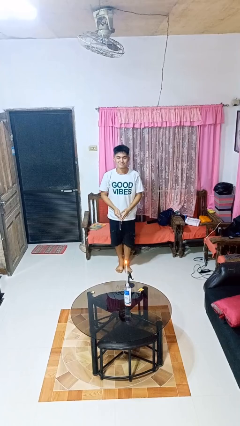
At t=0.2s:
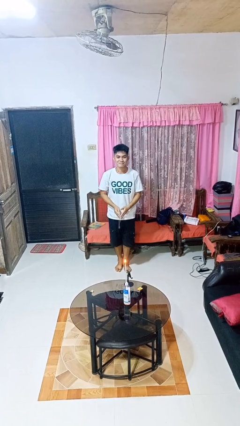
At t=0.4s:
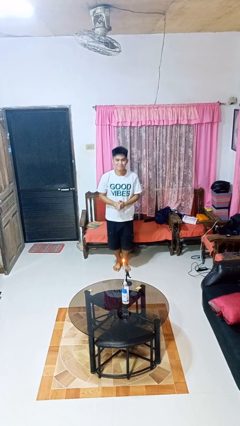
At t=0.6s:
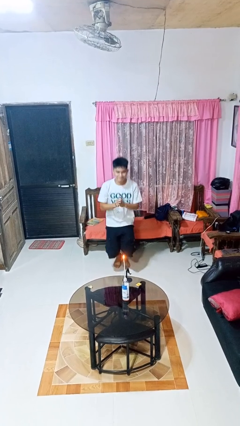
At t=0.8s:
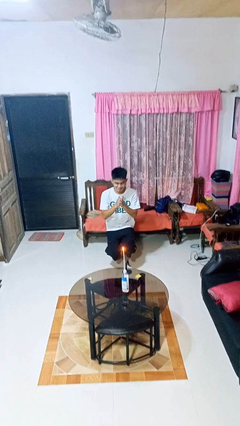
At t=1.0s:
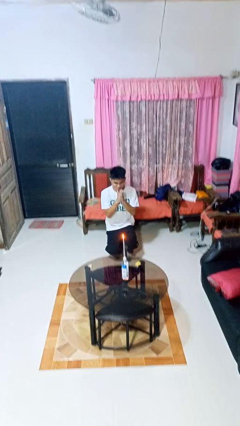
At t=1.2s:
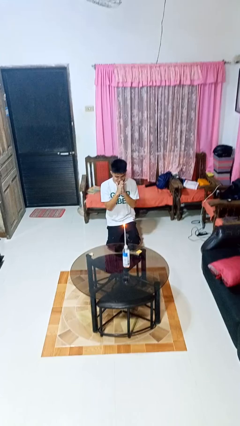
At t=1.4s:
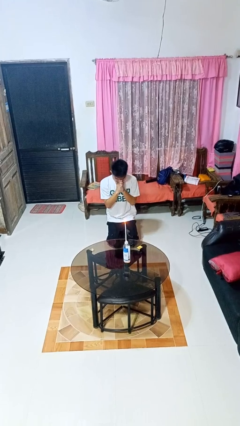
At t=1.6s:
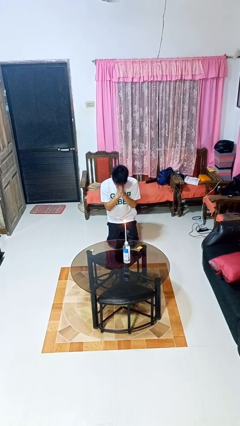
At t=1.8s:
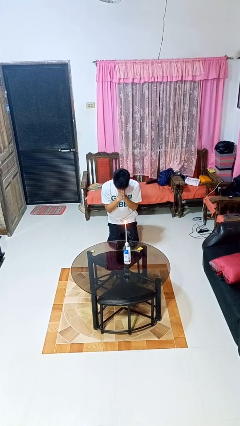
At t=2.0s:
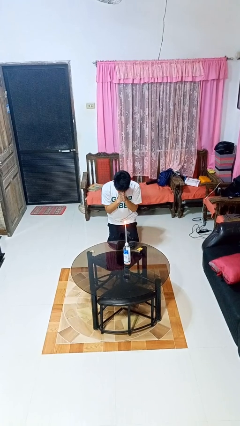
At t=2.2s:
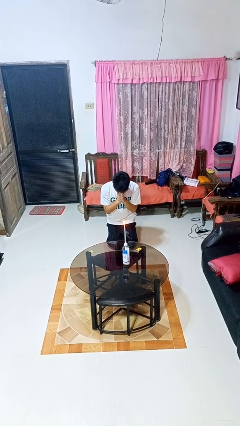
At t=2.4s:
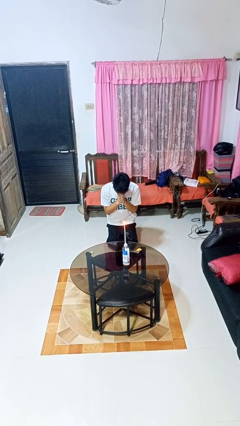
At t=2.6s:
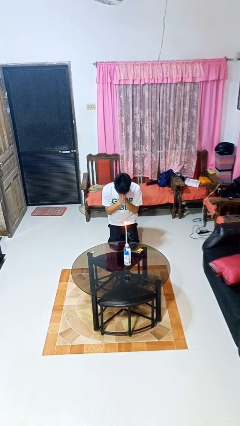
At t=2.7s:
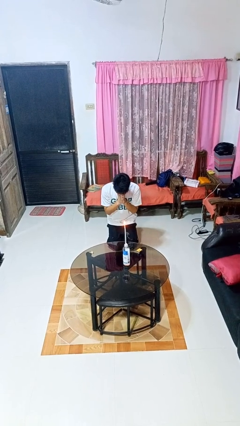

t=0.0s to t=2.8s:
person prays

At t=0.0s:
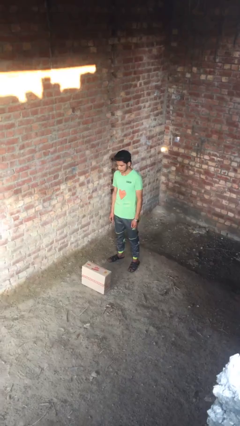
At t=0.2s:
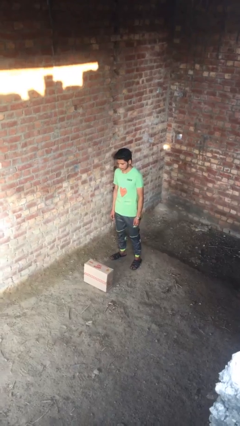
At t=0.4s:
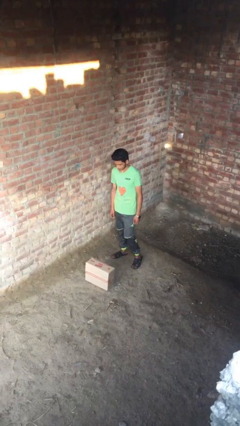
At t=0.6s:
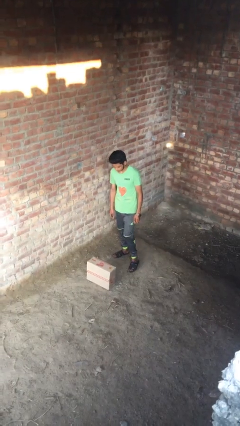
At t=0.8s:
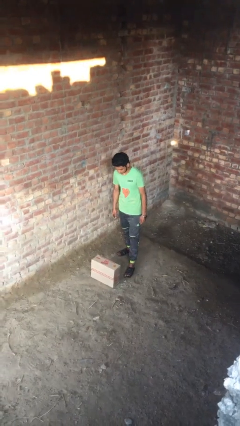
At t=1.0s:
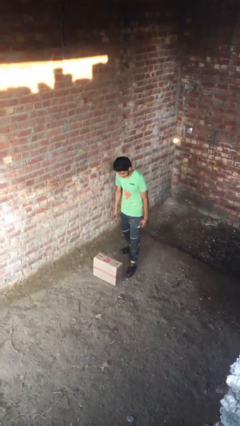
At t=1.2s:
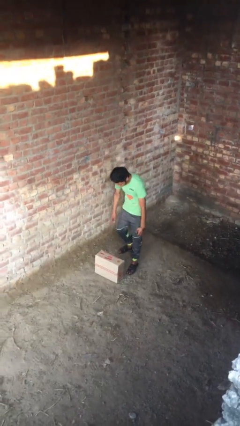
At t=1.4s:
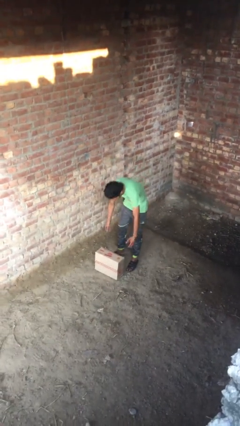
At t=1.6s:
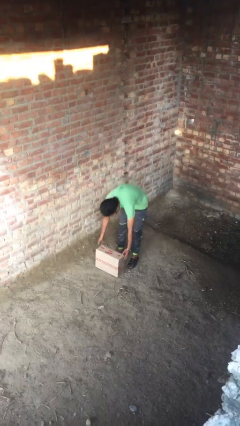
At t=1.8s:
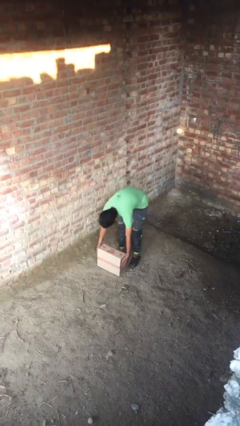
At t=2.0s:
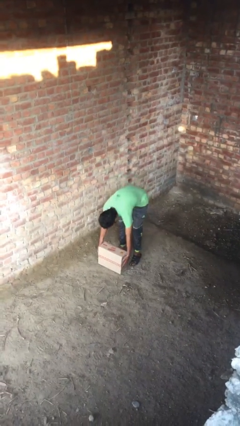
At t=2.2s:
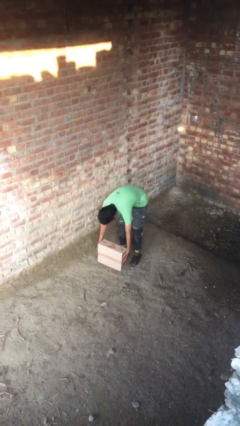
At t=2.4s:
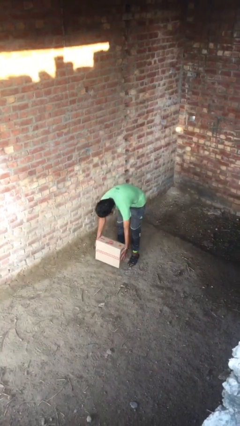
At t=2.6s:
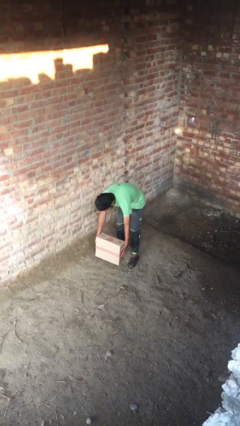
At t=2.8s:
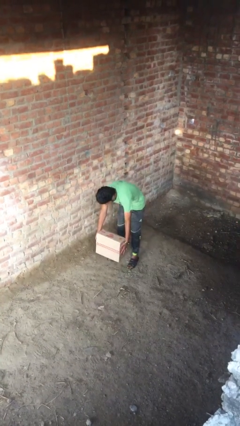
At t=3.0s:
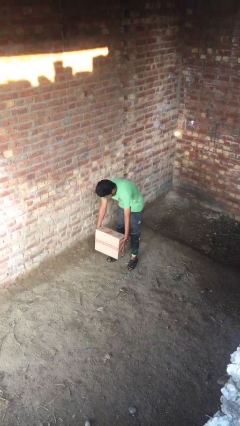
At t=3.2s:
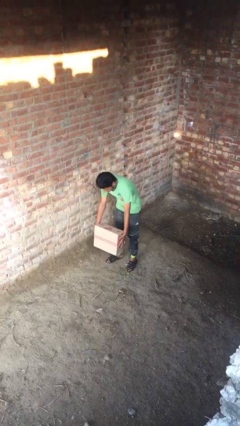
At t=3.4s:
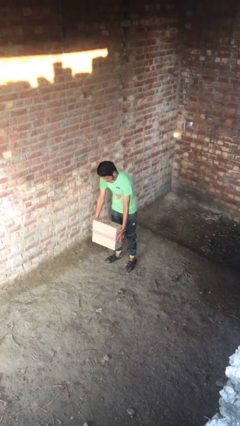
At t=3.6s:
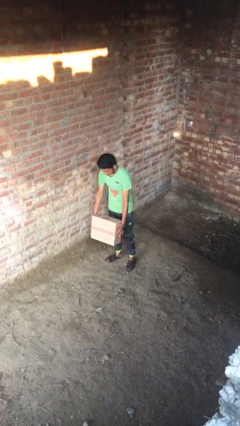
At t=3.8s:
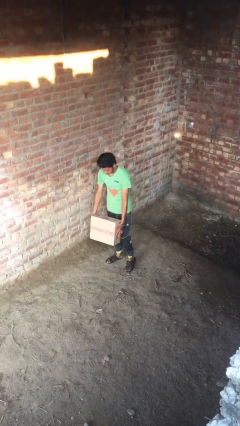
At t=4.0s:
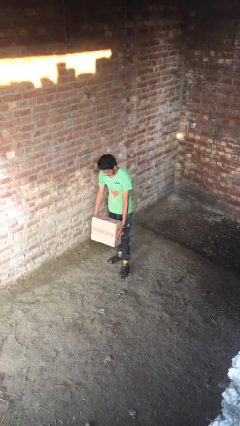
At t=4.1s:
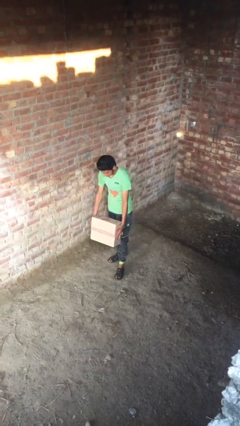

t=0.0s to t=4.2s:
person picks up object from floor

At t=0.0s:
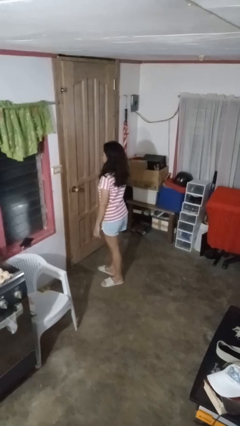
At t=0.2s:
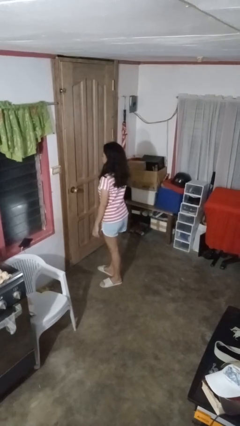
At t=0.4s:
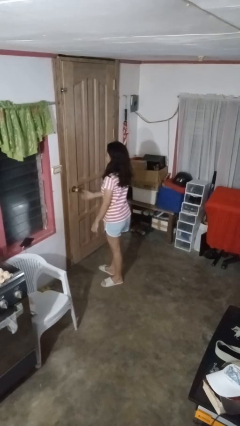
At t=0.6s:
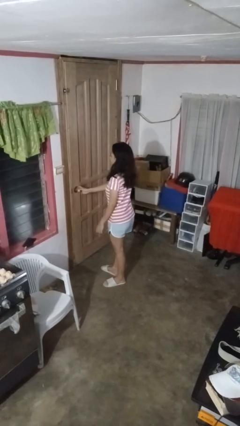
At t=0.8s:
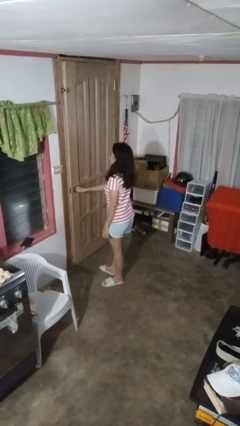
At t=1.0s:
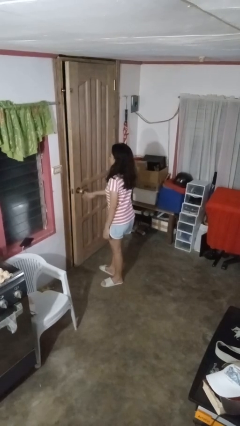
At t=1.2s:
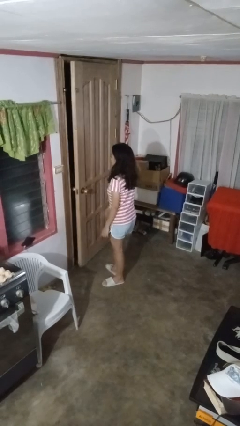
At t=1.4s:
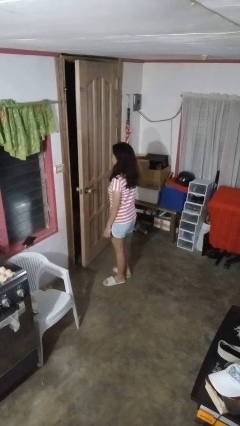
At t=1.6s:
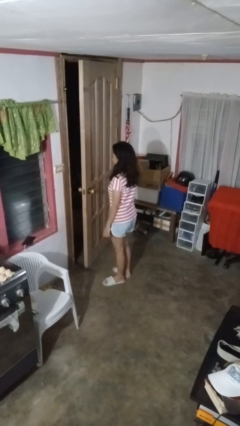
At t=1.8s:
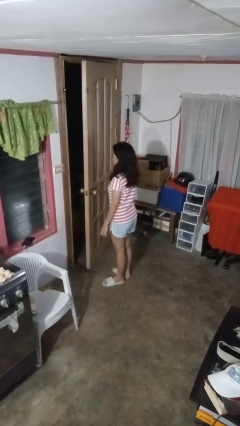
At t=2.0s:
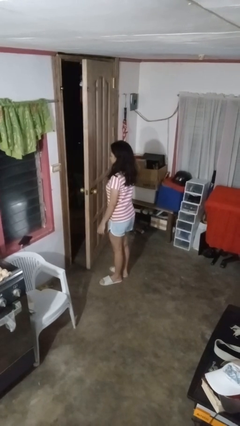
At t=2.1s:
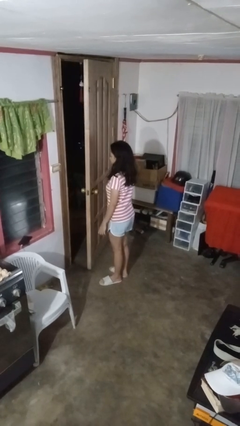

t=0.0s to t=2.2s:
person opens facility door

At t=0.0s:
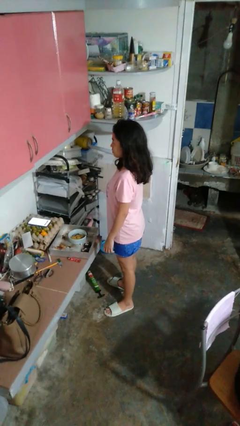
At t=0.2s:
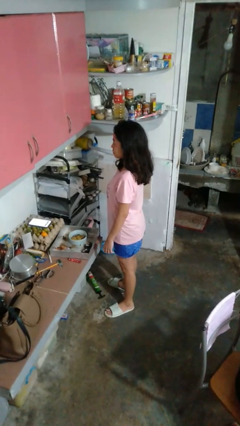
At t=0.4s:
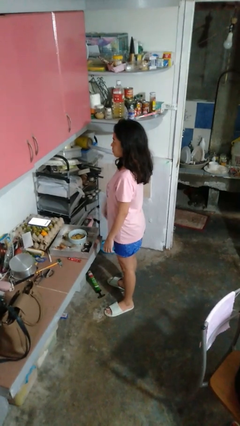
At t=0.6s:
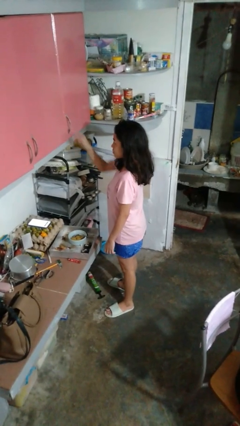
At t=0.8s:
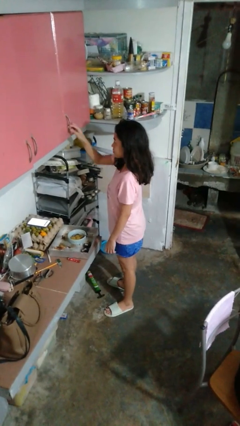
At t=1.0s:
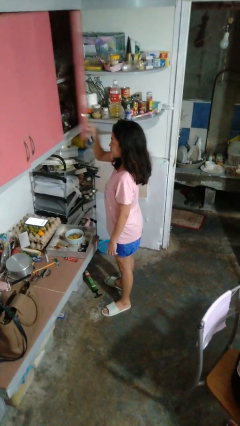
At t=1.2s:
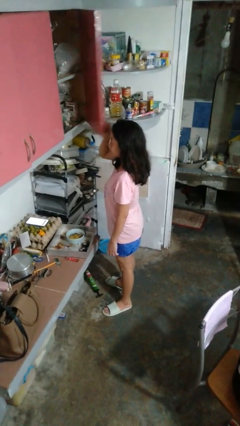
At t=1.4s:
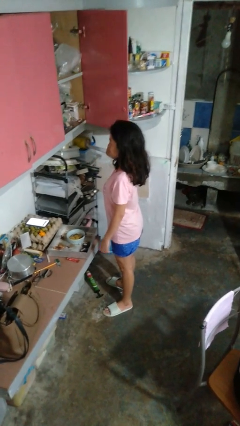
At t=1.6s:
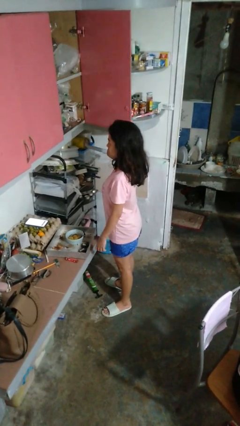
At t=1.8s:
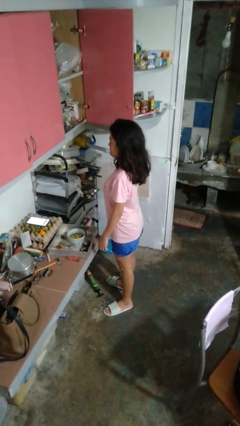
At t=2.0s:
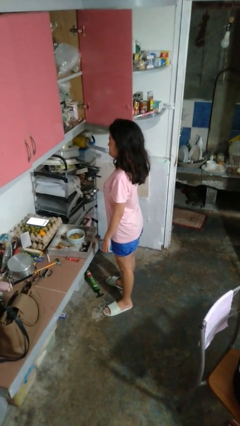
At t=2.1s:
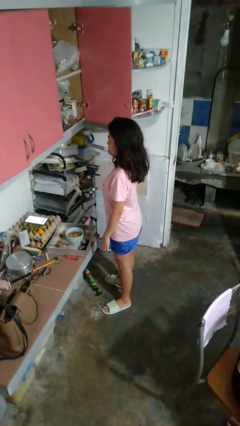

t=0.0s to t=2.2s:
person opens cabinet

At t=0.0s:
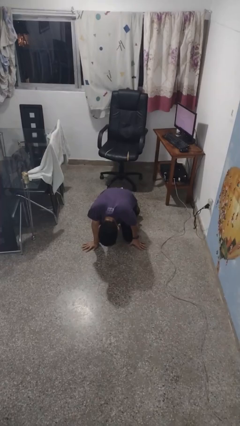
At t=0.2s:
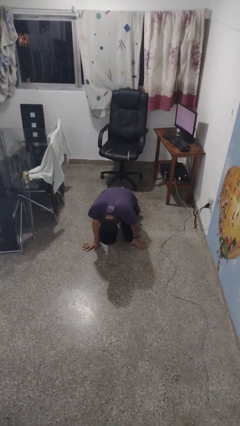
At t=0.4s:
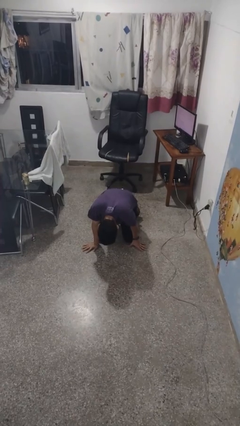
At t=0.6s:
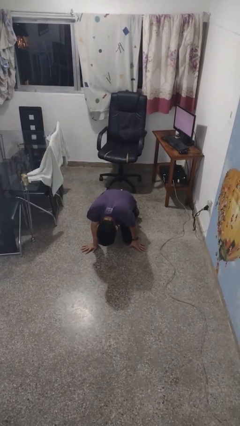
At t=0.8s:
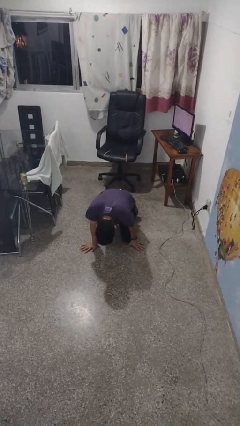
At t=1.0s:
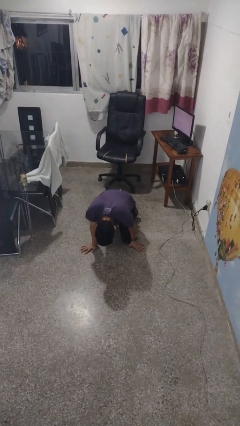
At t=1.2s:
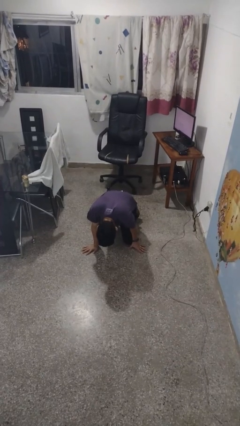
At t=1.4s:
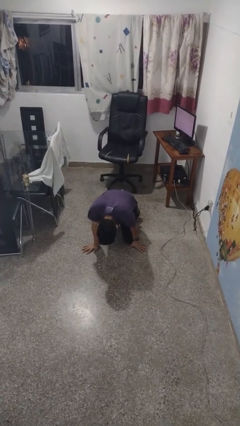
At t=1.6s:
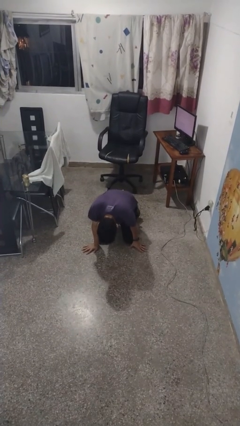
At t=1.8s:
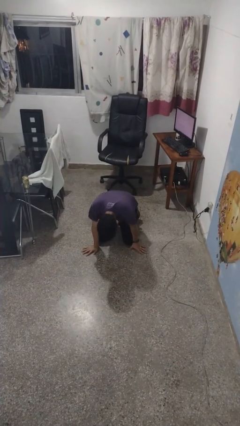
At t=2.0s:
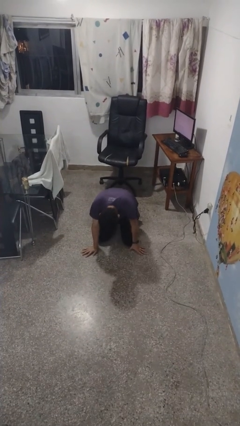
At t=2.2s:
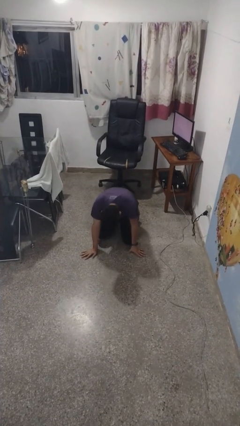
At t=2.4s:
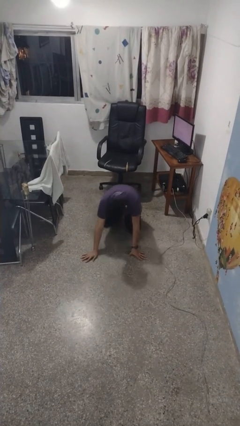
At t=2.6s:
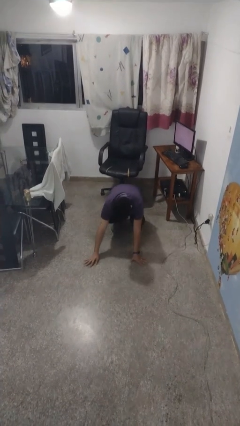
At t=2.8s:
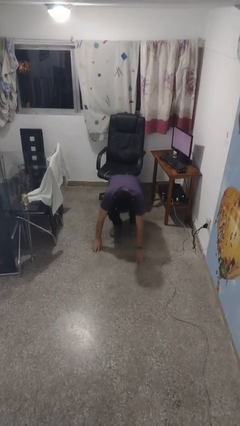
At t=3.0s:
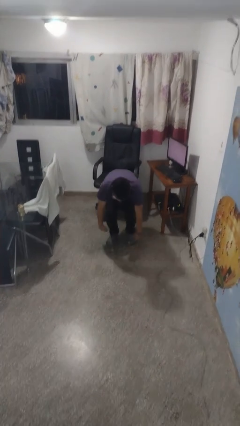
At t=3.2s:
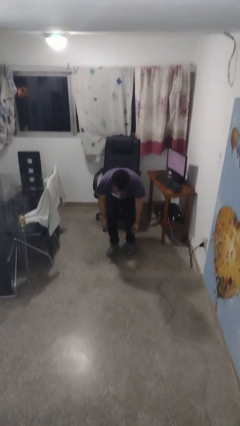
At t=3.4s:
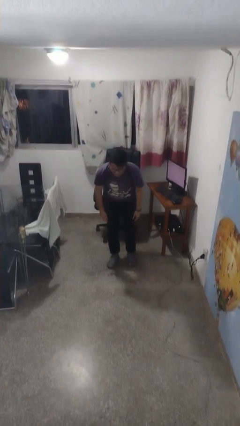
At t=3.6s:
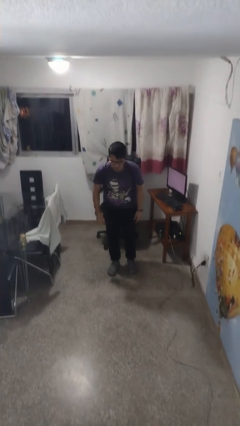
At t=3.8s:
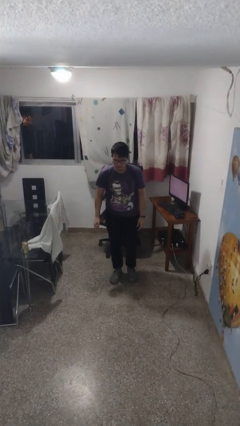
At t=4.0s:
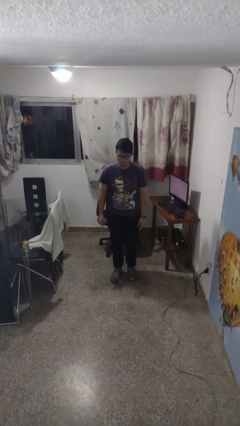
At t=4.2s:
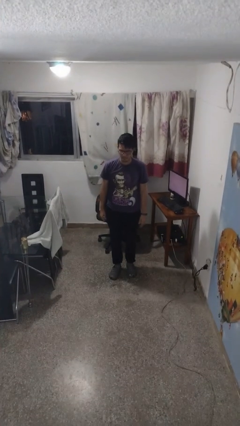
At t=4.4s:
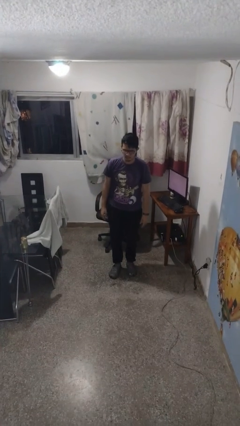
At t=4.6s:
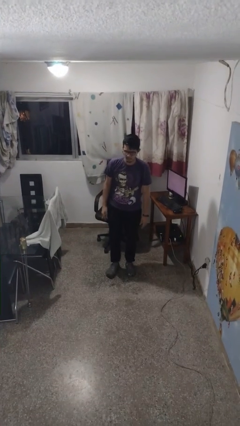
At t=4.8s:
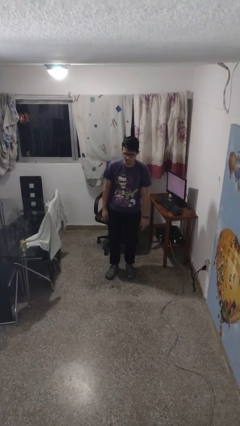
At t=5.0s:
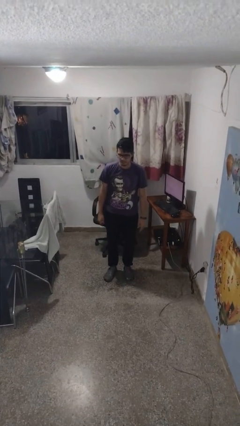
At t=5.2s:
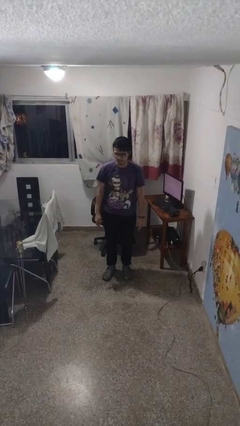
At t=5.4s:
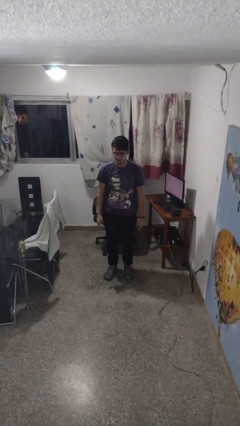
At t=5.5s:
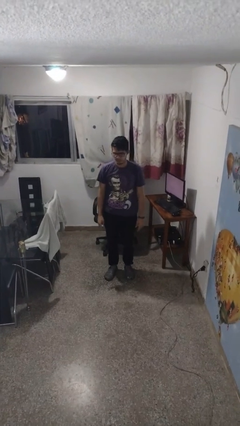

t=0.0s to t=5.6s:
person stands up from floor

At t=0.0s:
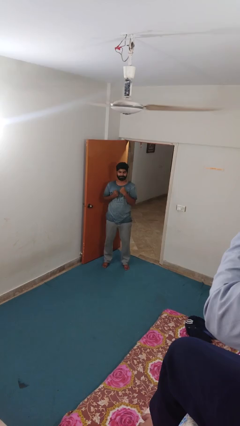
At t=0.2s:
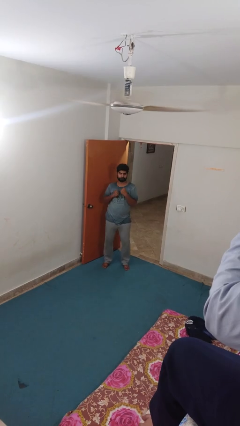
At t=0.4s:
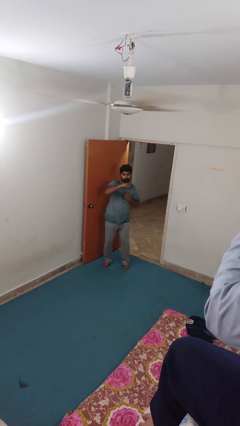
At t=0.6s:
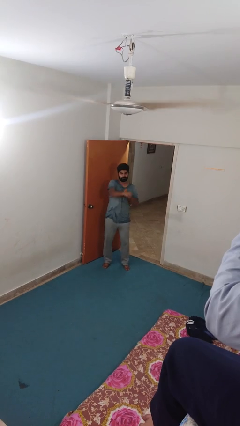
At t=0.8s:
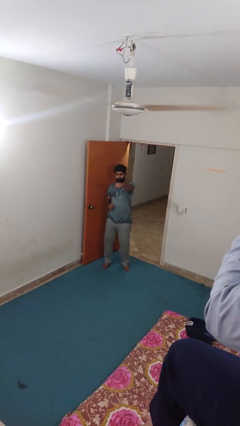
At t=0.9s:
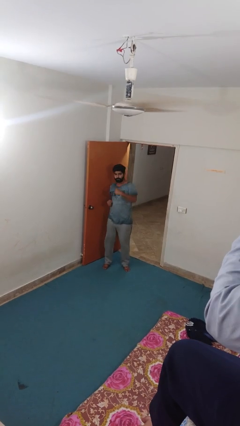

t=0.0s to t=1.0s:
person punches
